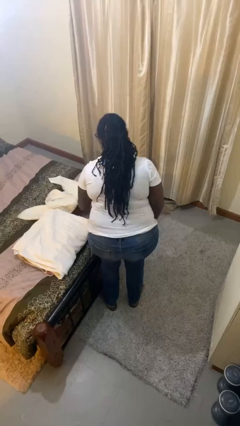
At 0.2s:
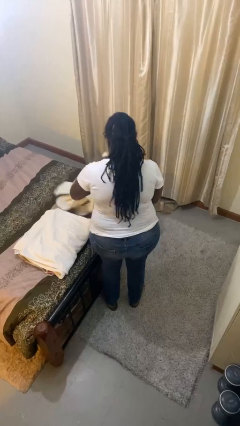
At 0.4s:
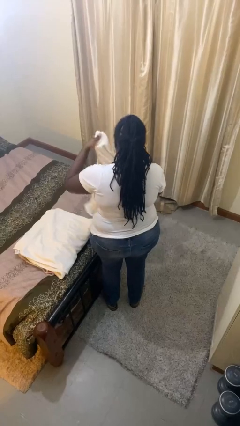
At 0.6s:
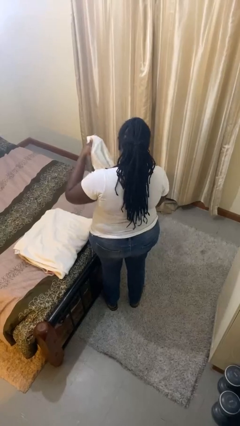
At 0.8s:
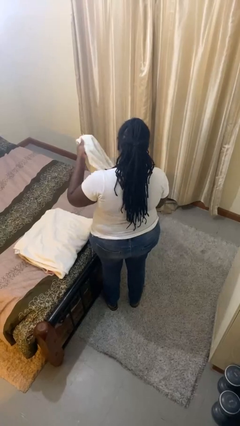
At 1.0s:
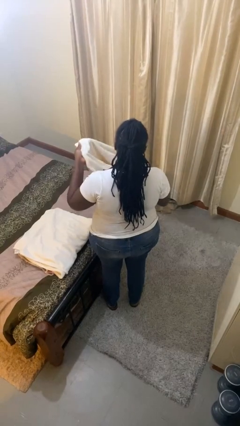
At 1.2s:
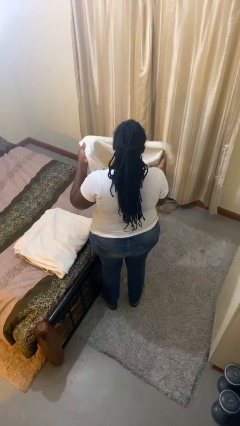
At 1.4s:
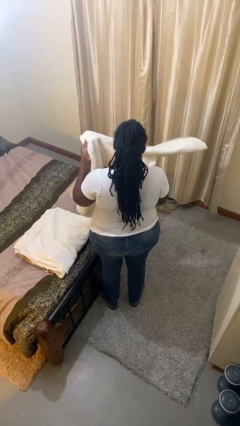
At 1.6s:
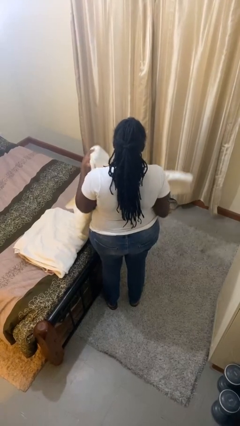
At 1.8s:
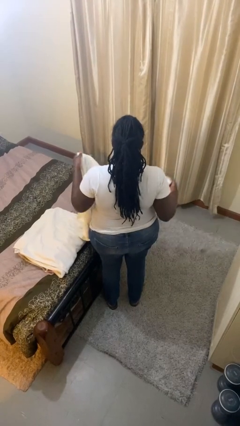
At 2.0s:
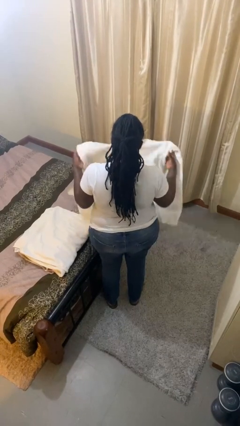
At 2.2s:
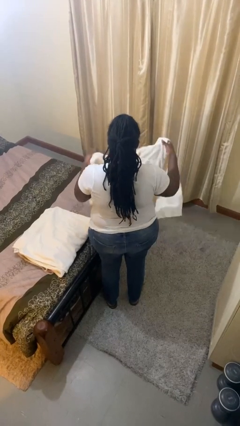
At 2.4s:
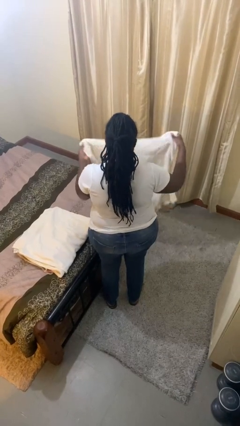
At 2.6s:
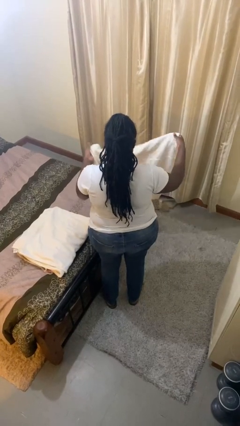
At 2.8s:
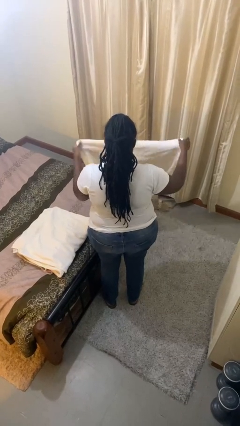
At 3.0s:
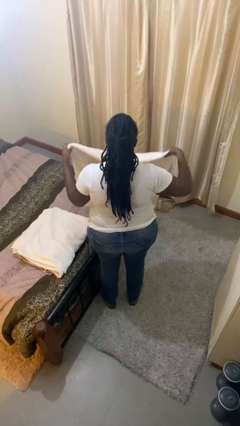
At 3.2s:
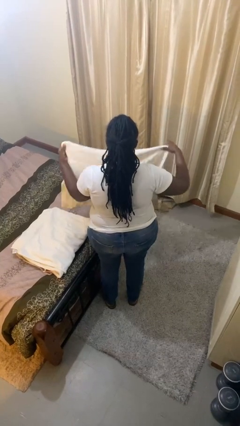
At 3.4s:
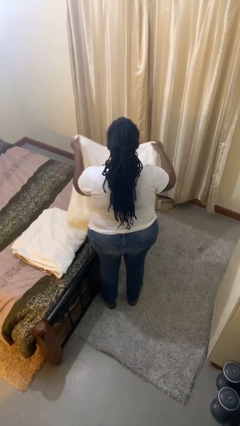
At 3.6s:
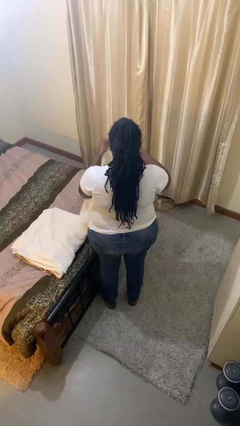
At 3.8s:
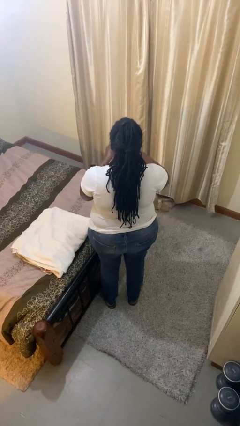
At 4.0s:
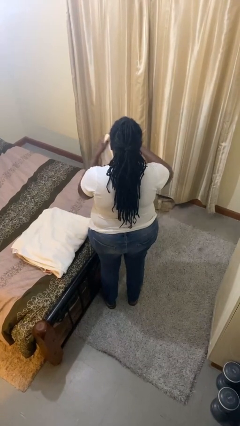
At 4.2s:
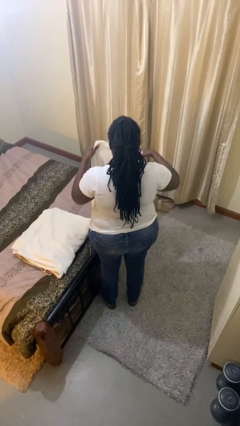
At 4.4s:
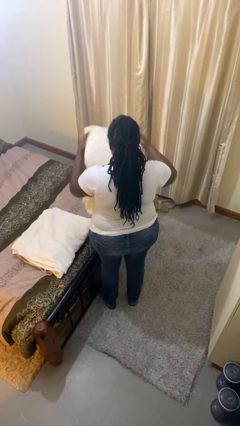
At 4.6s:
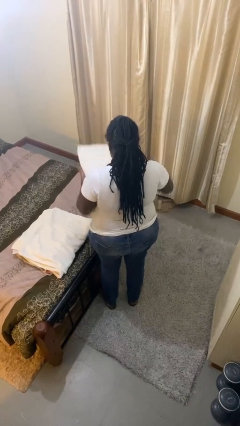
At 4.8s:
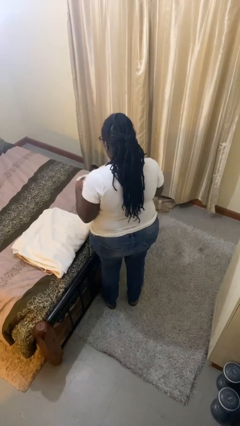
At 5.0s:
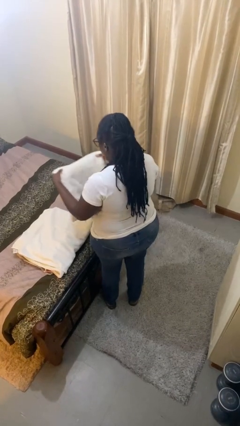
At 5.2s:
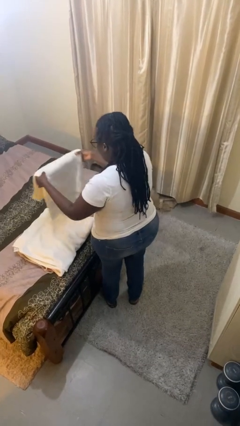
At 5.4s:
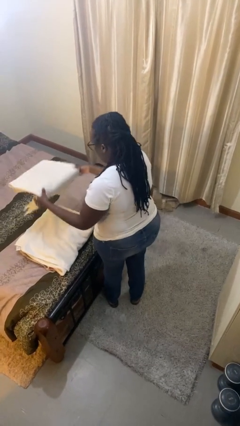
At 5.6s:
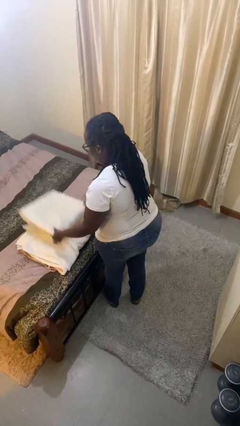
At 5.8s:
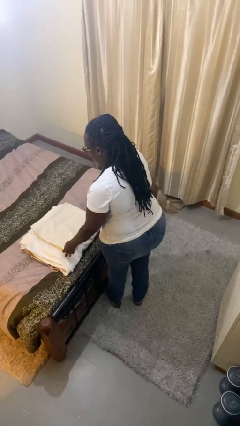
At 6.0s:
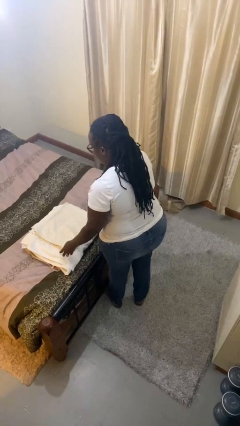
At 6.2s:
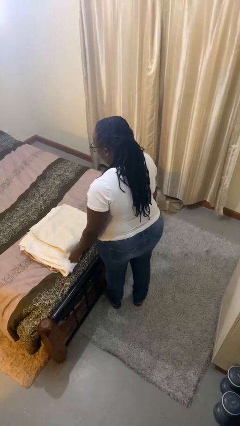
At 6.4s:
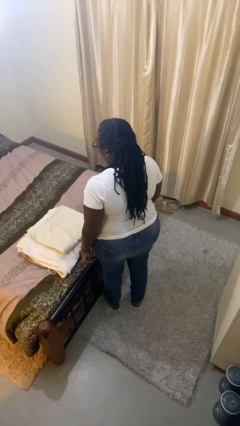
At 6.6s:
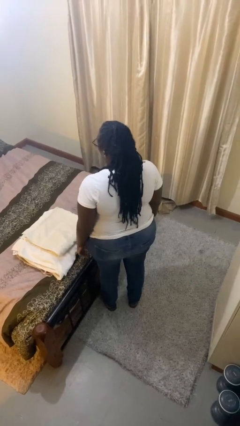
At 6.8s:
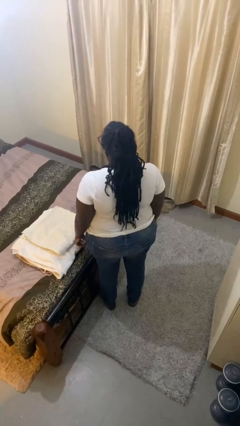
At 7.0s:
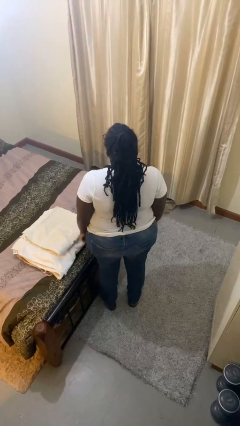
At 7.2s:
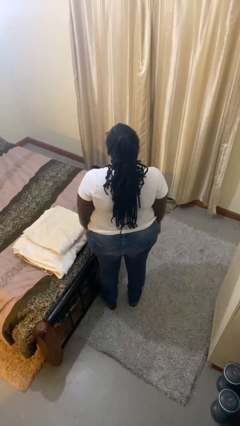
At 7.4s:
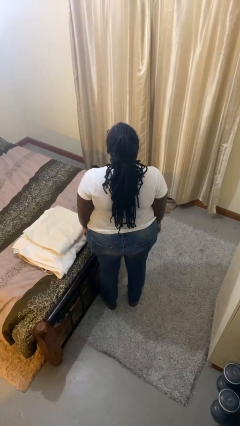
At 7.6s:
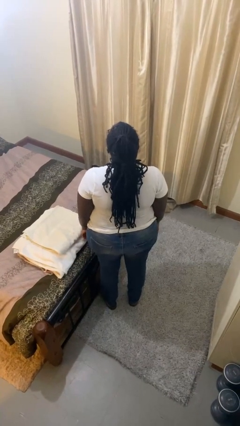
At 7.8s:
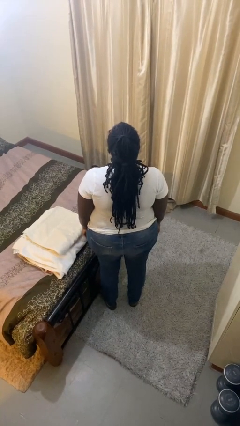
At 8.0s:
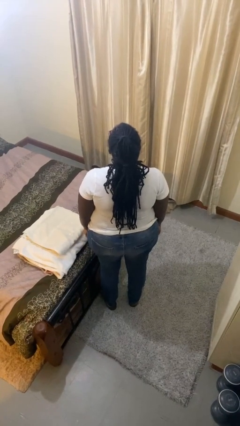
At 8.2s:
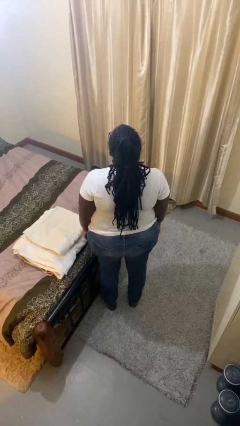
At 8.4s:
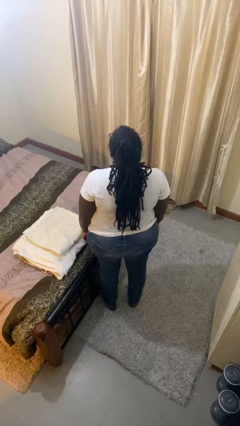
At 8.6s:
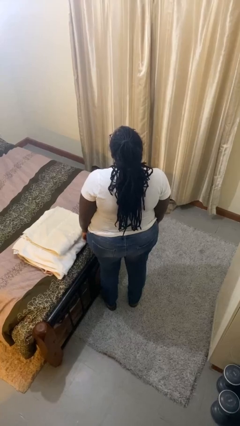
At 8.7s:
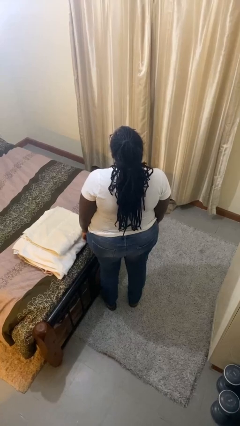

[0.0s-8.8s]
person folds towel

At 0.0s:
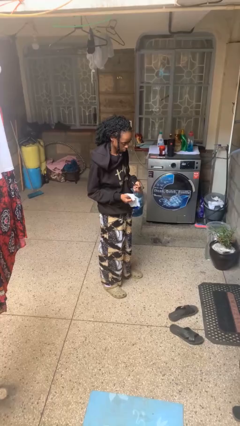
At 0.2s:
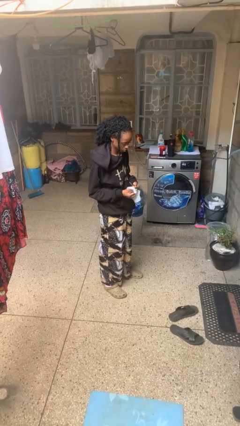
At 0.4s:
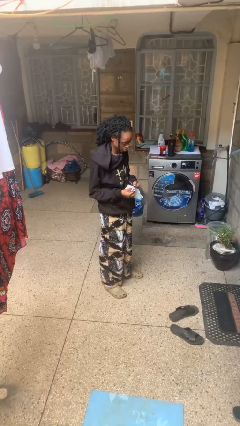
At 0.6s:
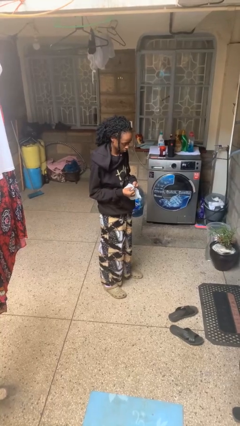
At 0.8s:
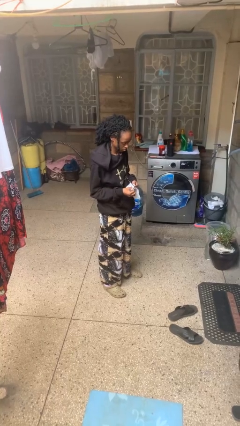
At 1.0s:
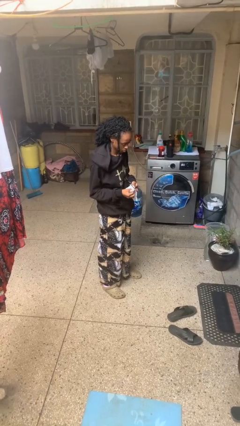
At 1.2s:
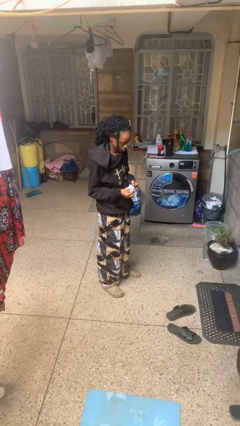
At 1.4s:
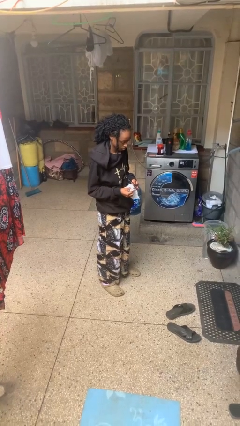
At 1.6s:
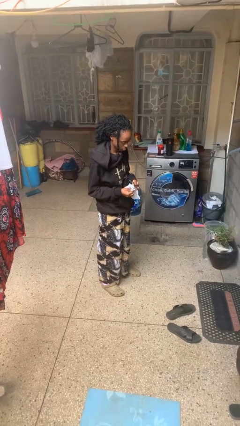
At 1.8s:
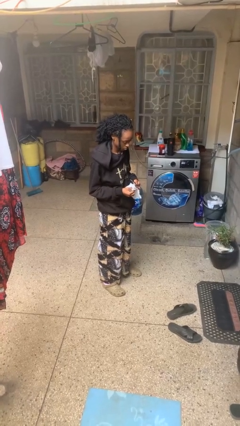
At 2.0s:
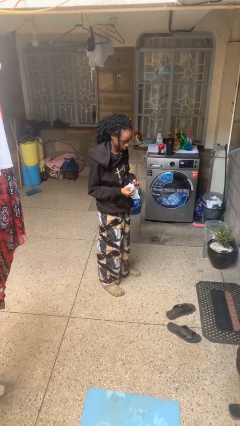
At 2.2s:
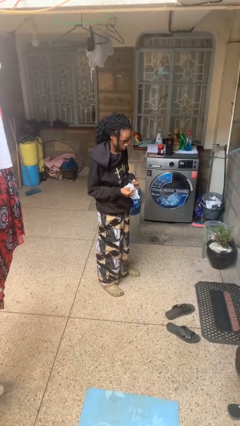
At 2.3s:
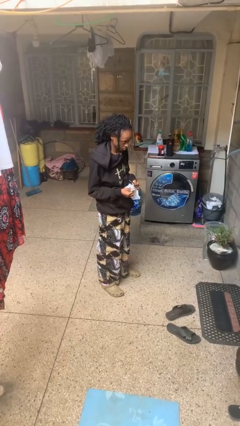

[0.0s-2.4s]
person cleans eyeglasses

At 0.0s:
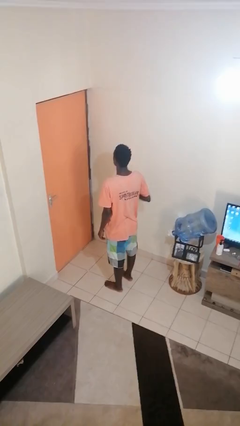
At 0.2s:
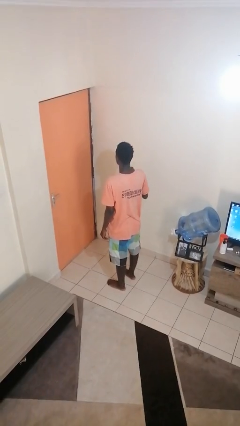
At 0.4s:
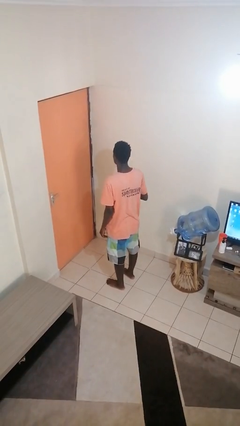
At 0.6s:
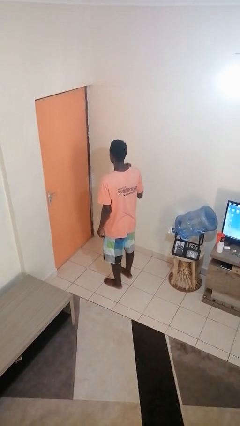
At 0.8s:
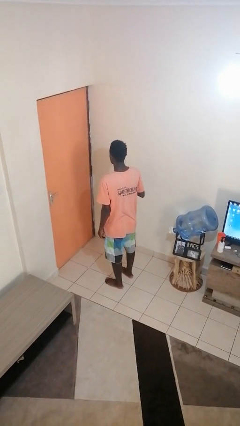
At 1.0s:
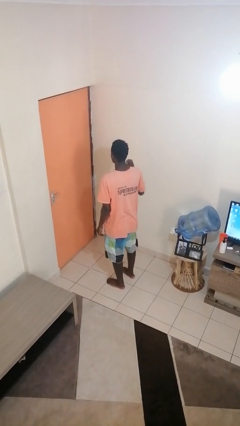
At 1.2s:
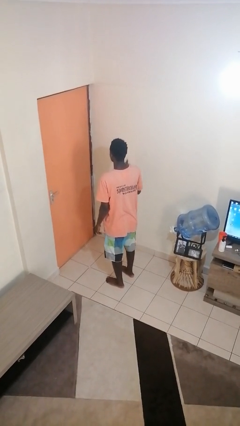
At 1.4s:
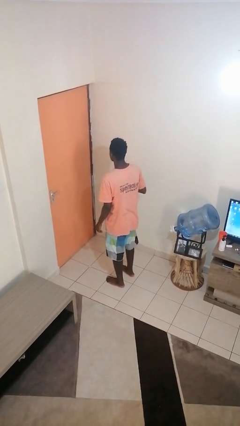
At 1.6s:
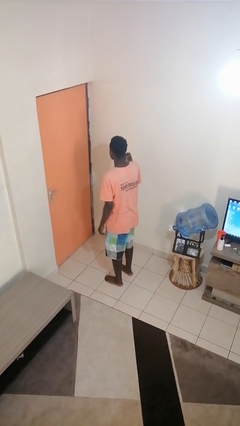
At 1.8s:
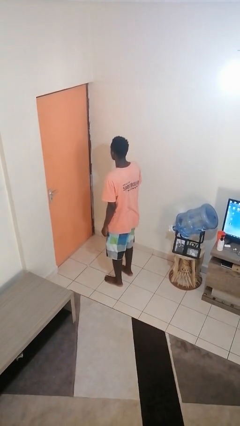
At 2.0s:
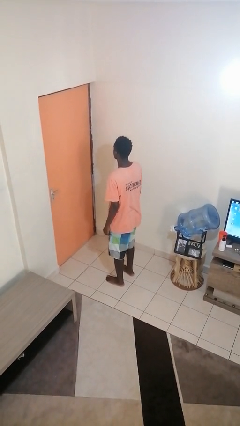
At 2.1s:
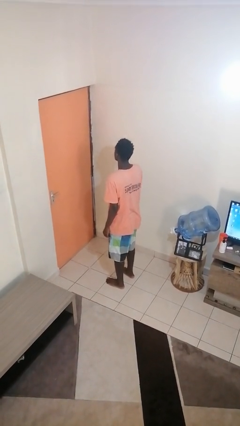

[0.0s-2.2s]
person snaps fingers

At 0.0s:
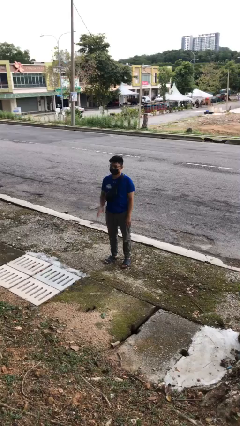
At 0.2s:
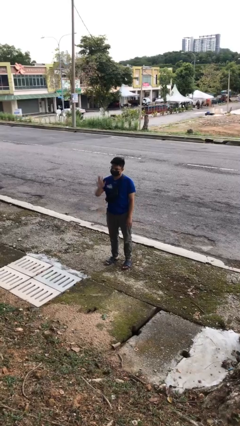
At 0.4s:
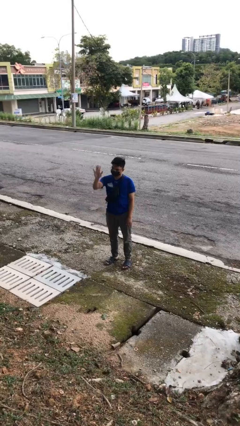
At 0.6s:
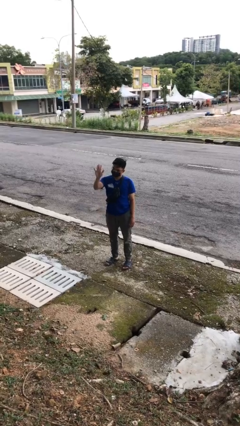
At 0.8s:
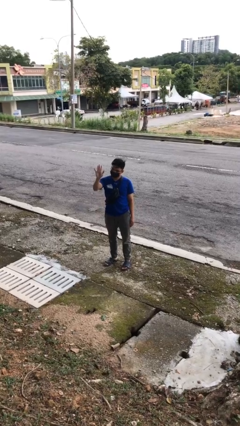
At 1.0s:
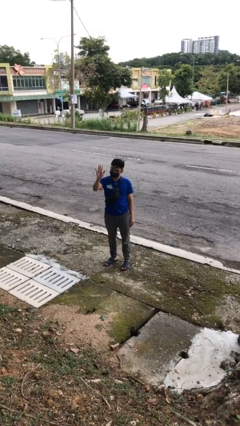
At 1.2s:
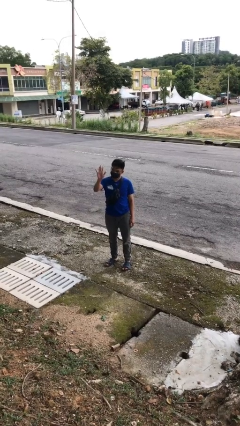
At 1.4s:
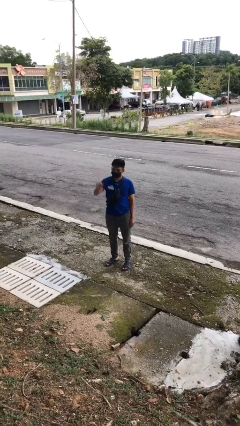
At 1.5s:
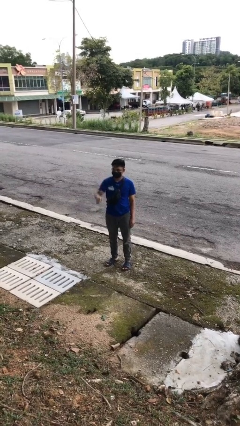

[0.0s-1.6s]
person gestures stop

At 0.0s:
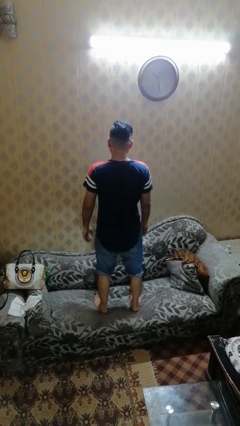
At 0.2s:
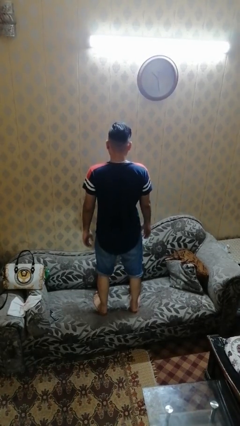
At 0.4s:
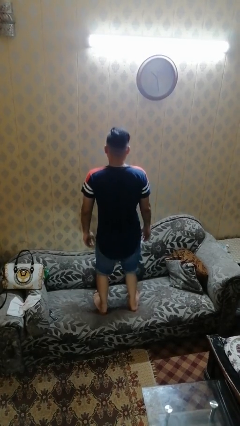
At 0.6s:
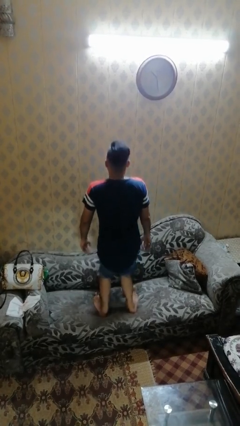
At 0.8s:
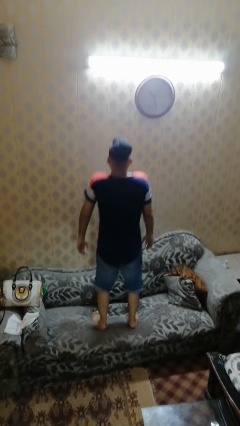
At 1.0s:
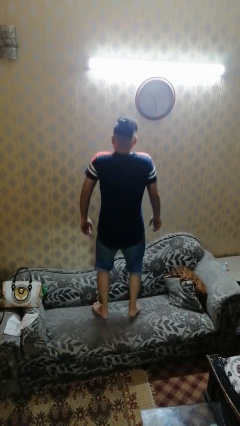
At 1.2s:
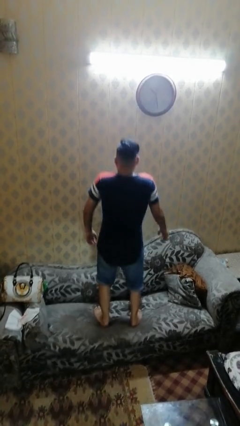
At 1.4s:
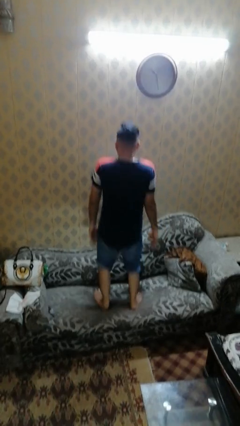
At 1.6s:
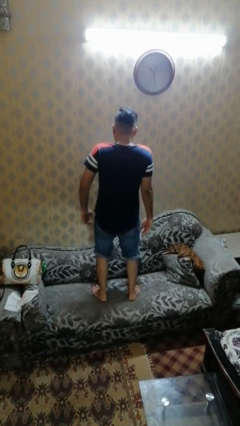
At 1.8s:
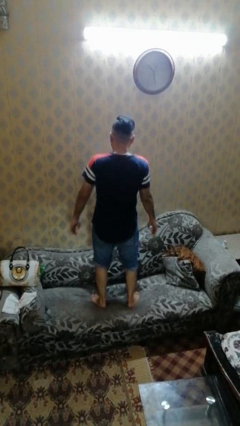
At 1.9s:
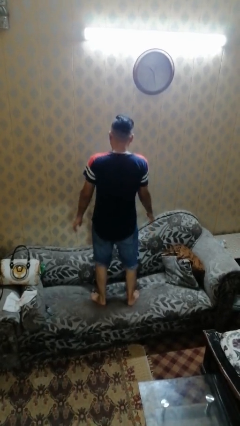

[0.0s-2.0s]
person jumps on couch

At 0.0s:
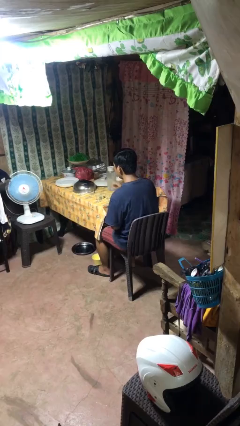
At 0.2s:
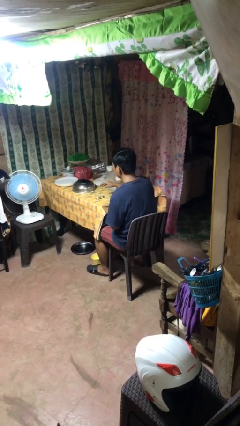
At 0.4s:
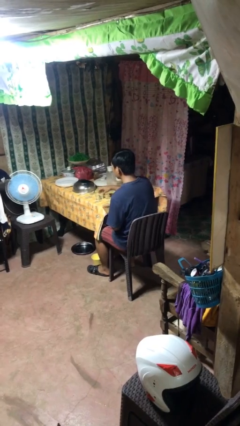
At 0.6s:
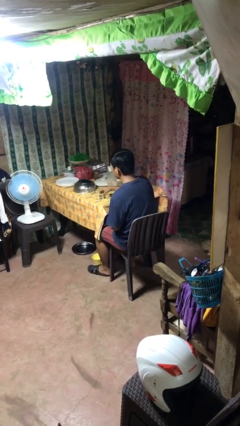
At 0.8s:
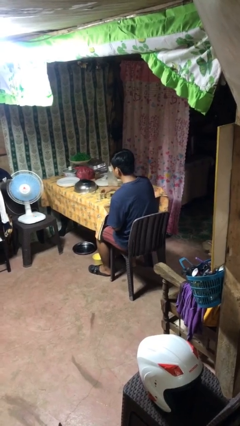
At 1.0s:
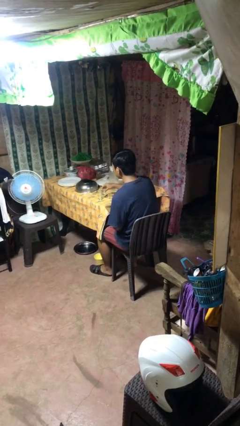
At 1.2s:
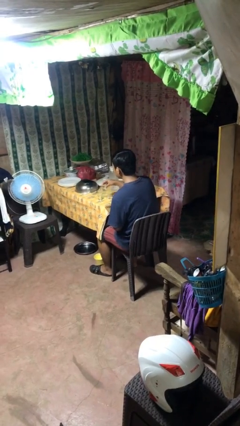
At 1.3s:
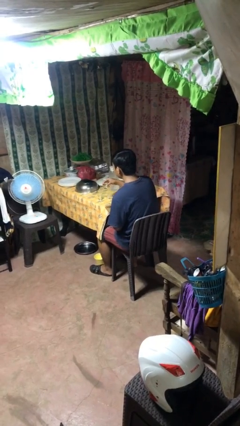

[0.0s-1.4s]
person picks up object from table
